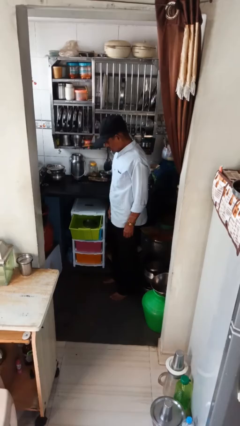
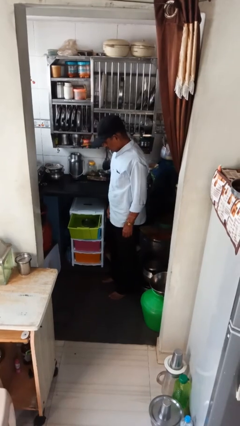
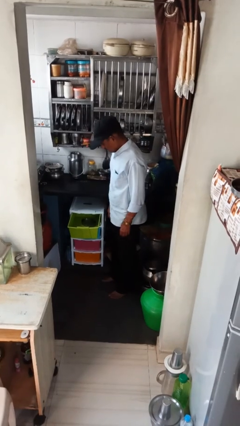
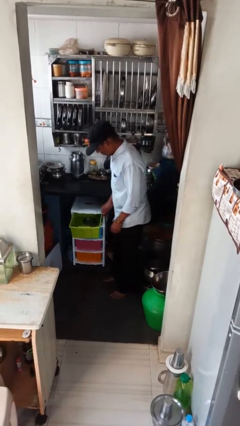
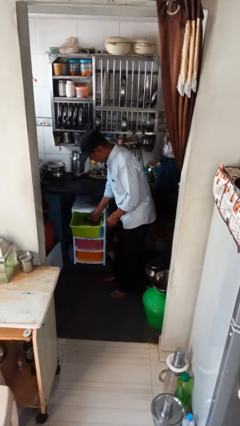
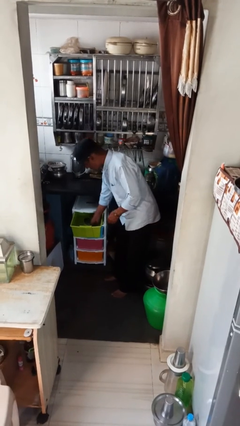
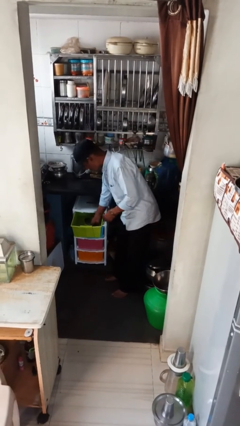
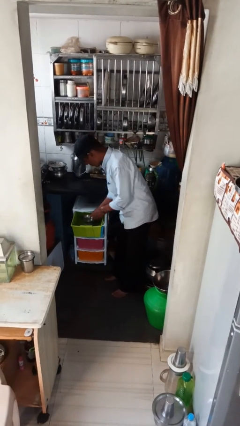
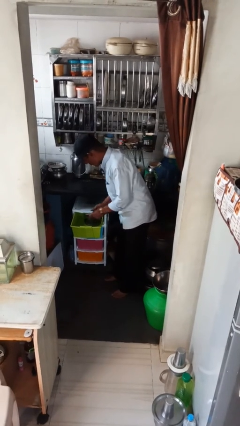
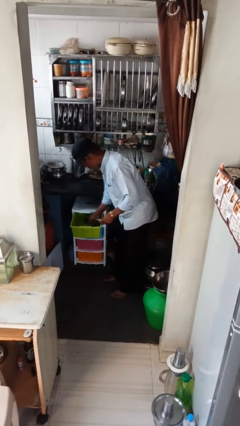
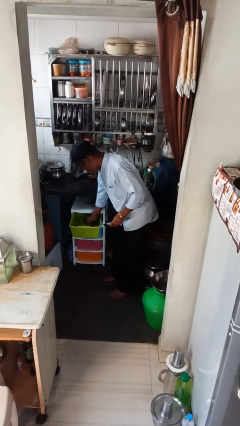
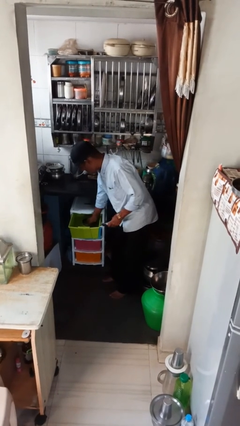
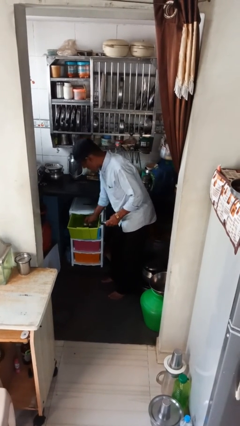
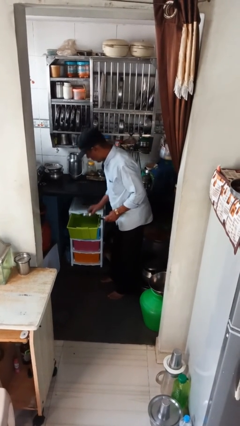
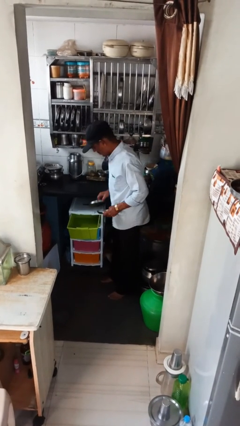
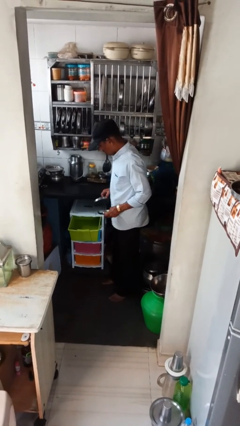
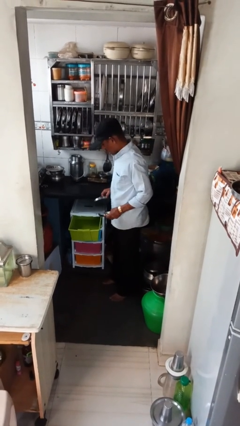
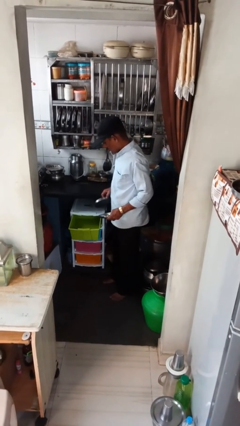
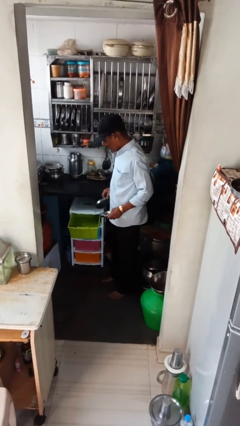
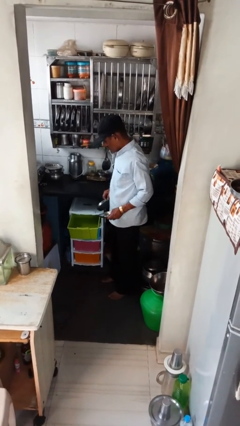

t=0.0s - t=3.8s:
person takes object from cabinet

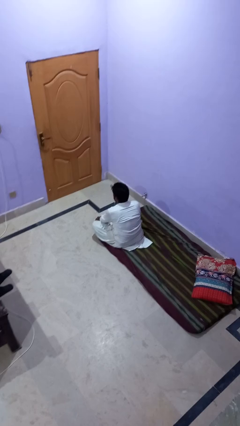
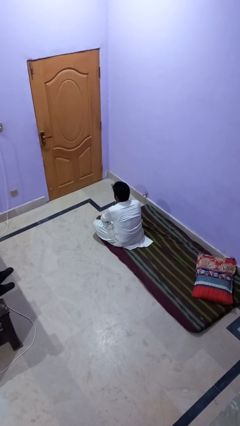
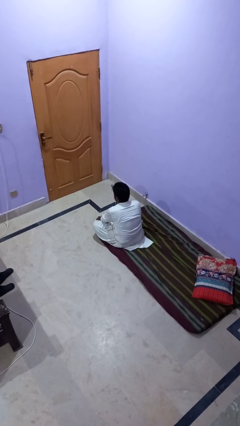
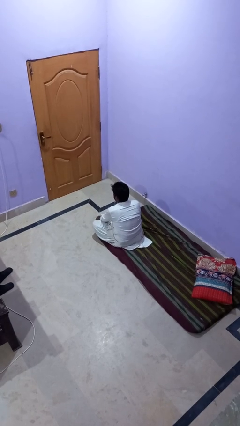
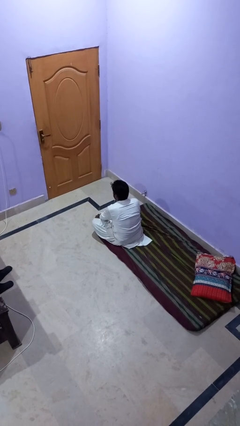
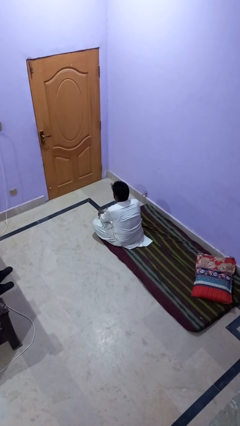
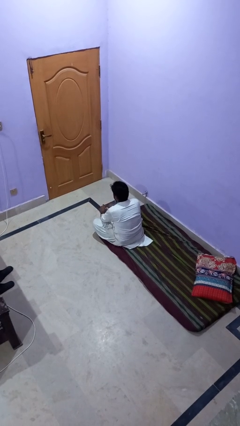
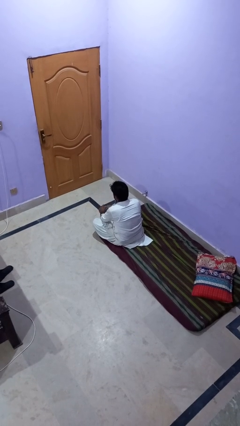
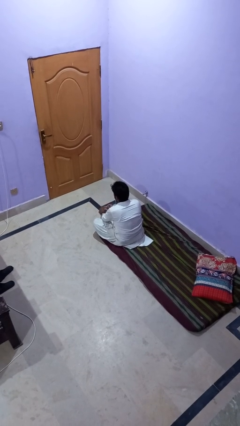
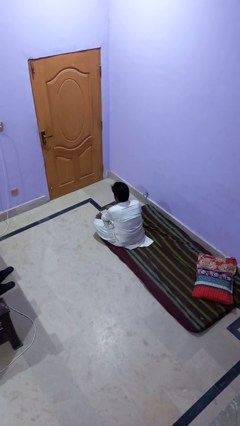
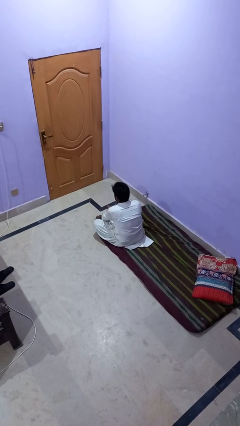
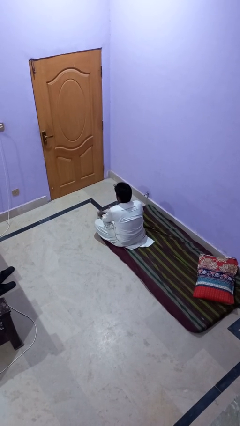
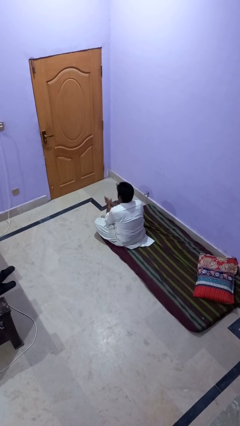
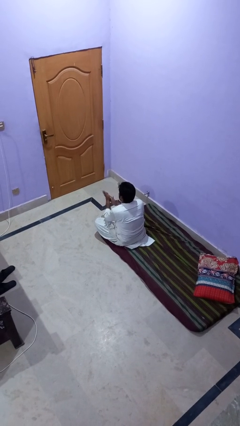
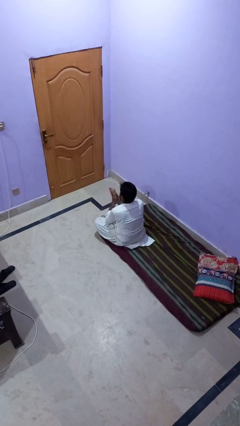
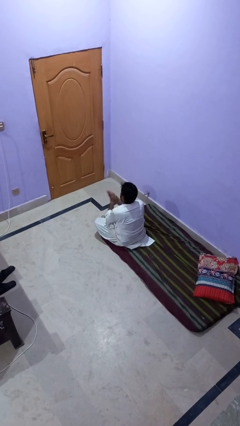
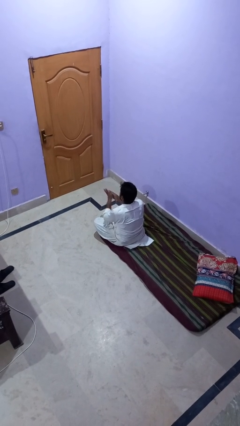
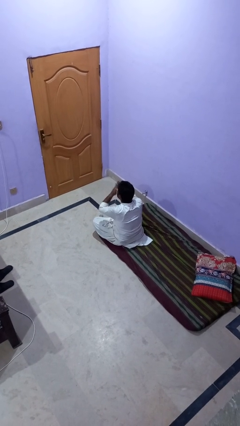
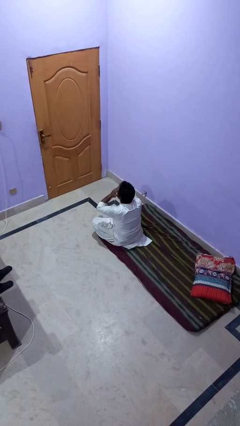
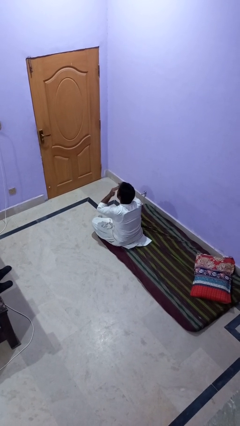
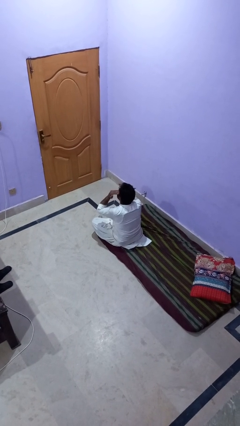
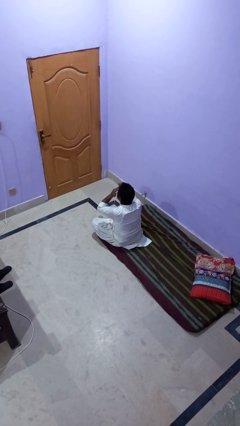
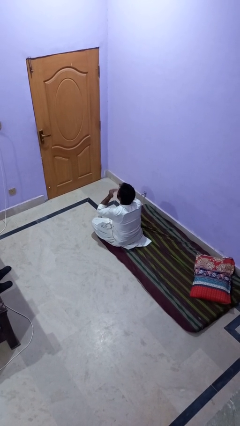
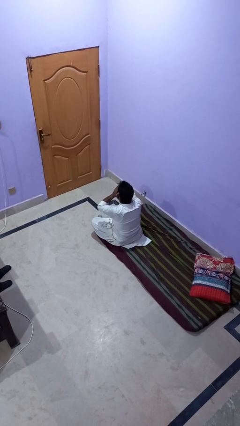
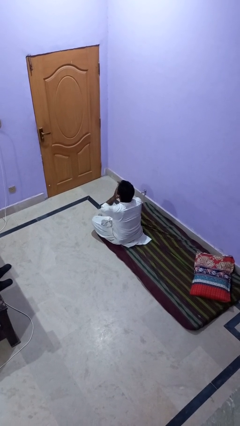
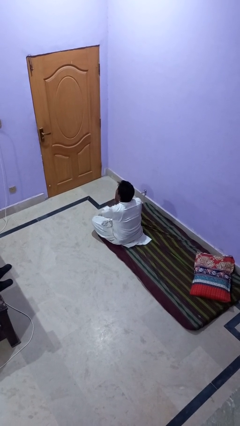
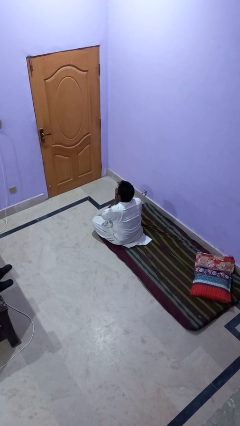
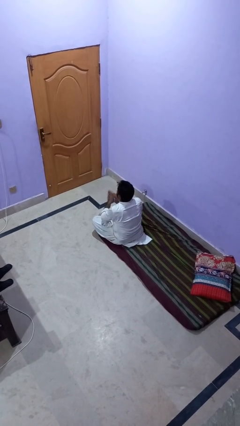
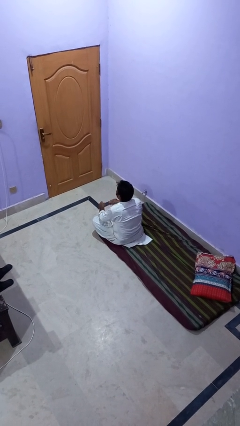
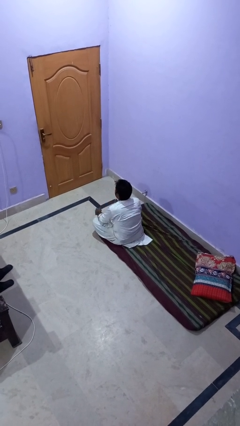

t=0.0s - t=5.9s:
person applies sunscreen

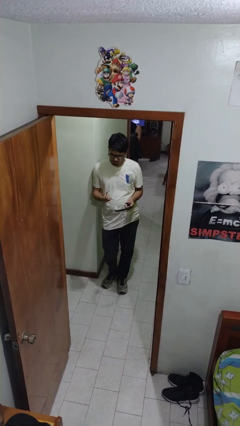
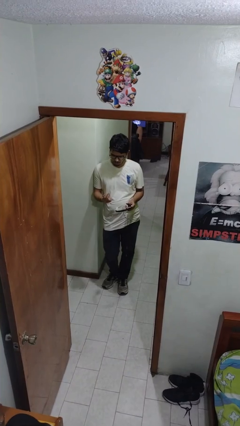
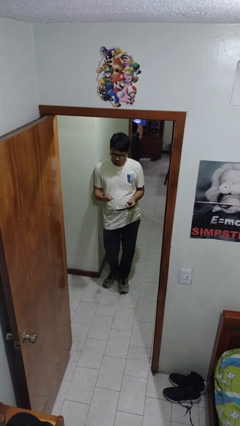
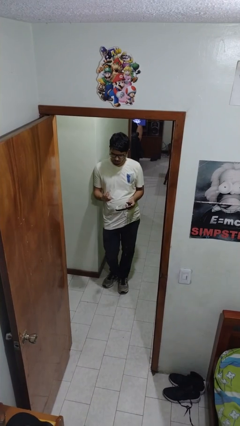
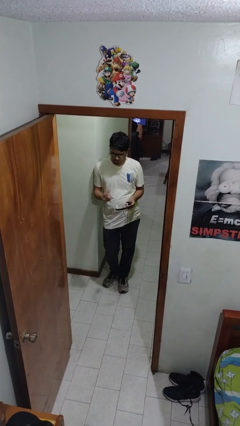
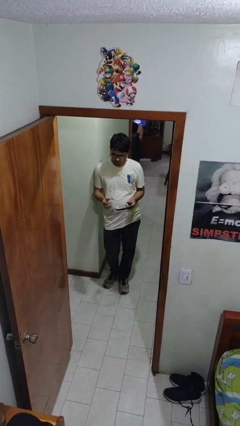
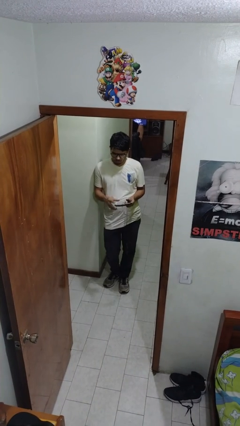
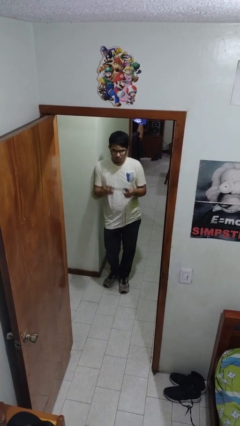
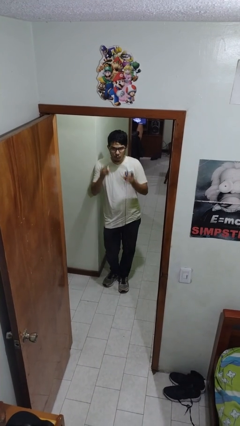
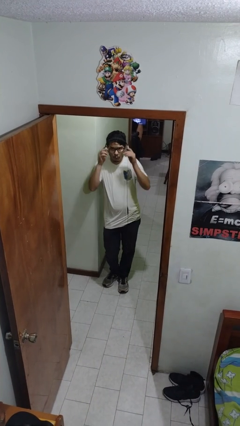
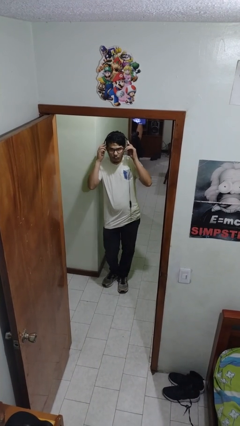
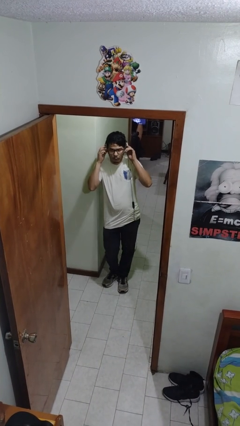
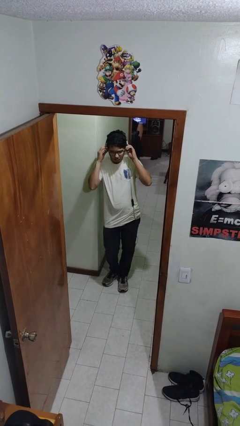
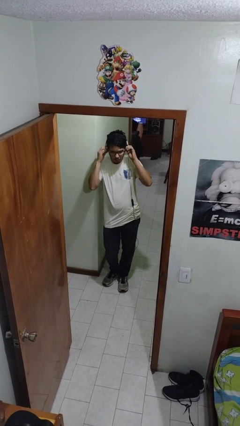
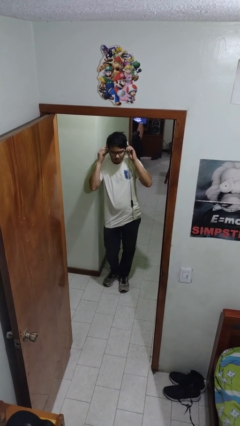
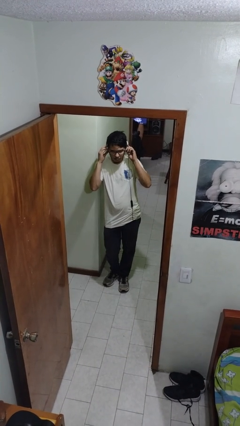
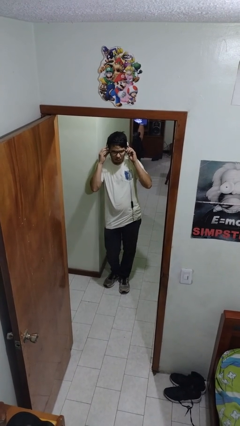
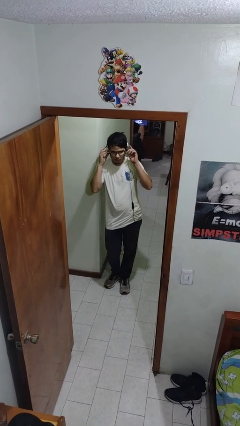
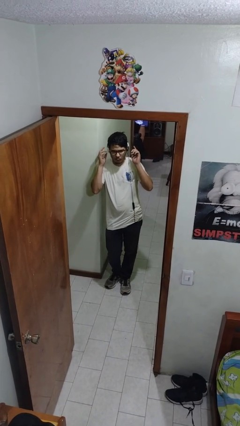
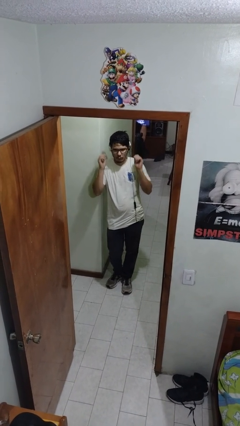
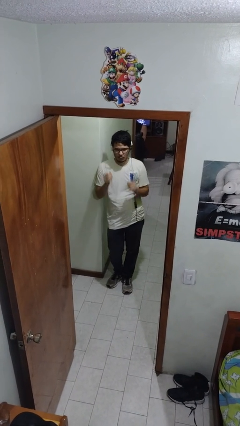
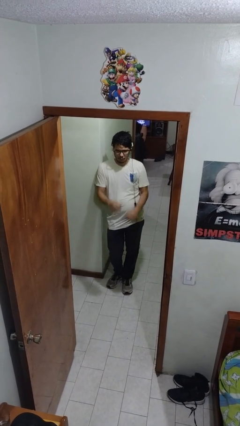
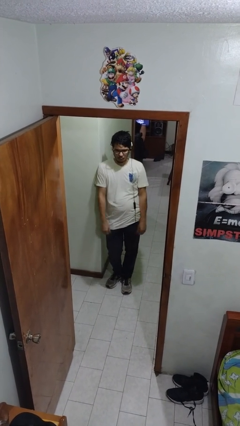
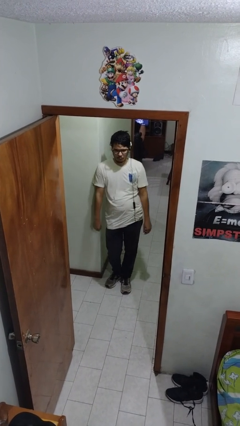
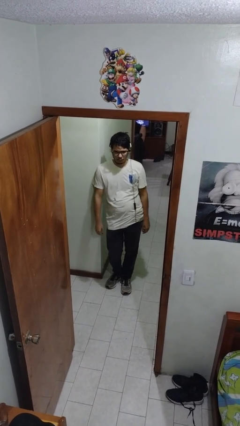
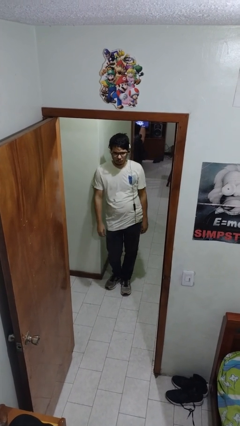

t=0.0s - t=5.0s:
person puts on headphones

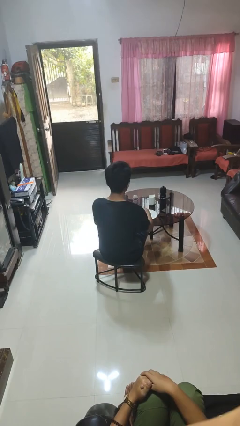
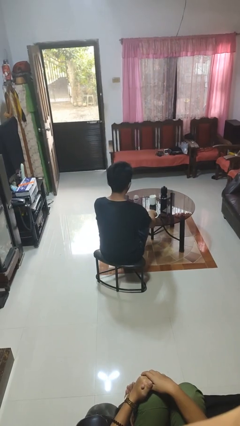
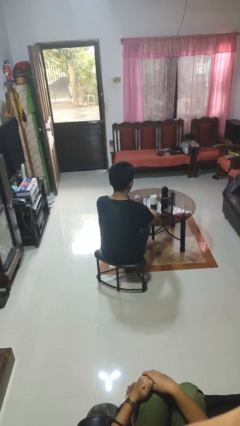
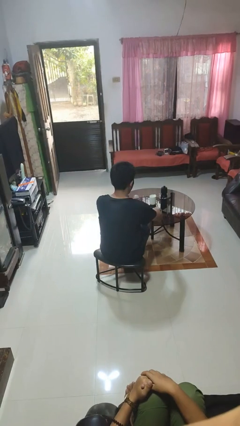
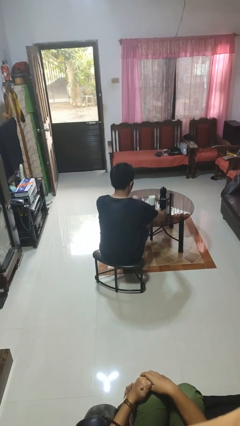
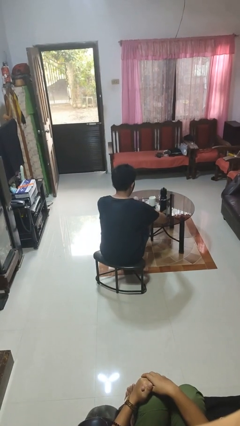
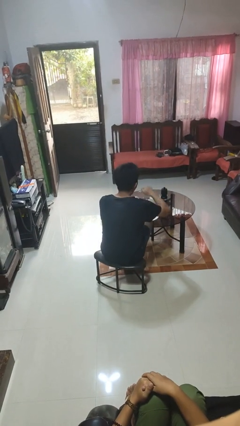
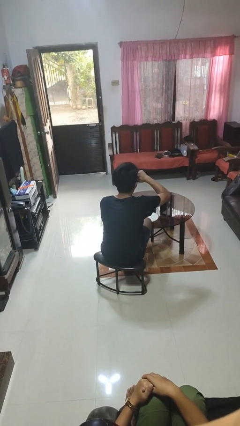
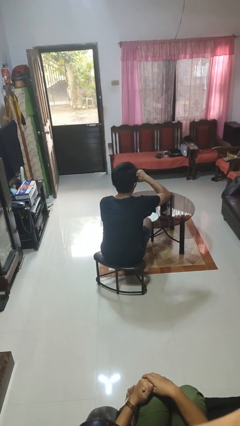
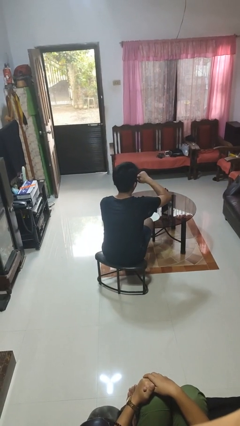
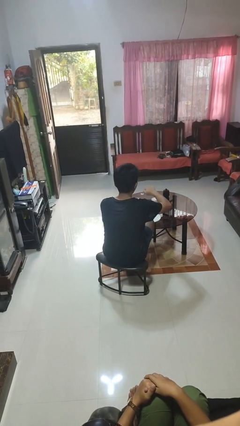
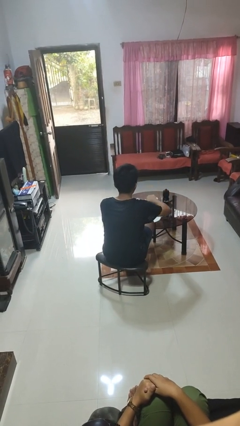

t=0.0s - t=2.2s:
person eats with utensil

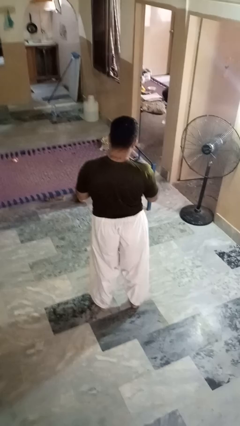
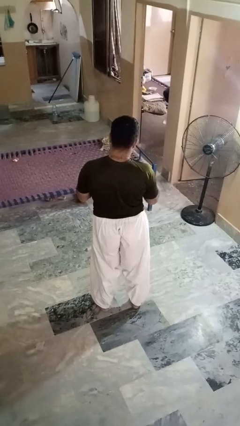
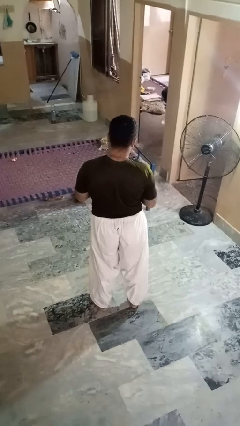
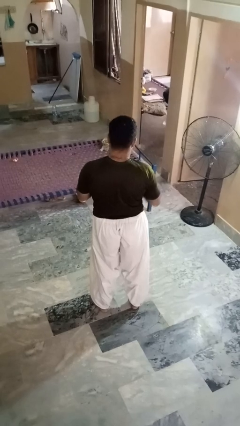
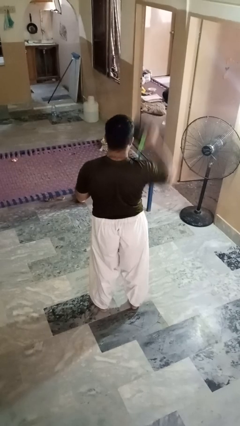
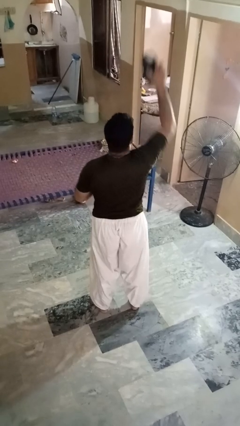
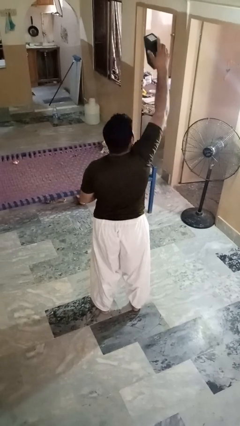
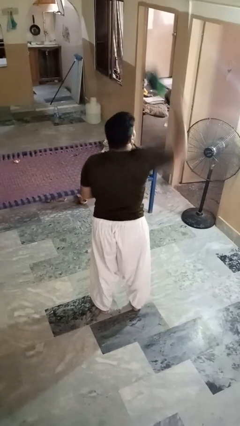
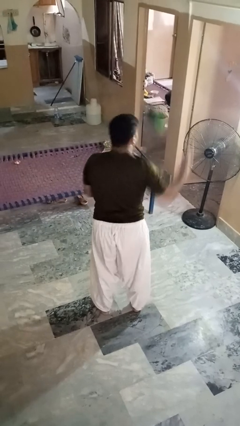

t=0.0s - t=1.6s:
person drops object
